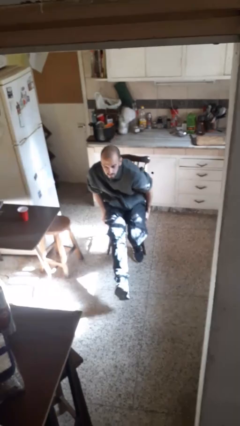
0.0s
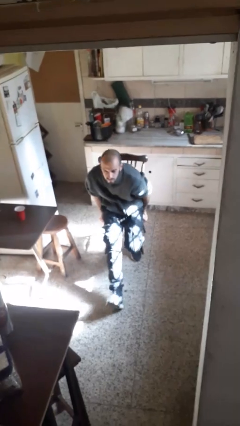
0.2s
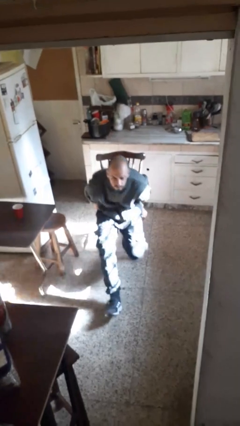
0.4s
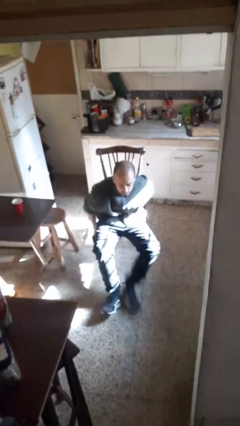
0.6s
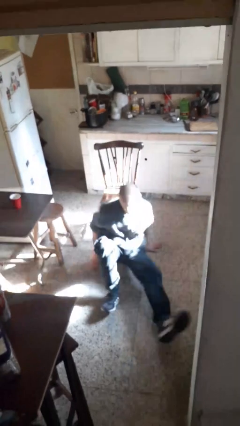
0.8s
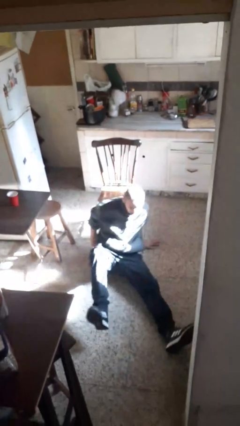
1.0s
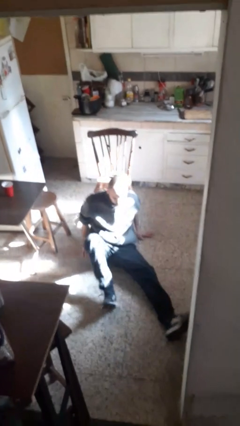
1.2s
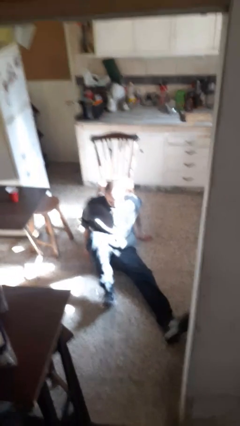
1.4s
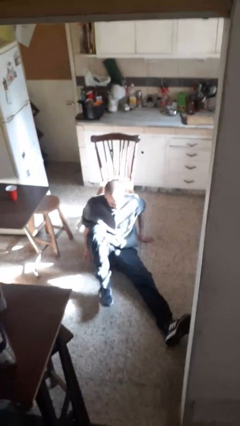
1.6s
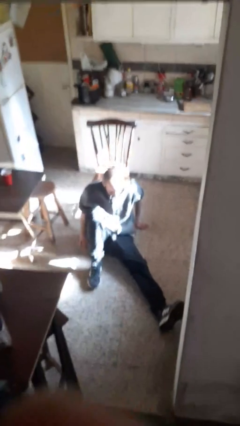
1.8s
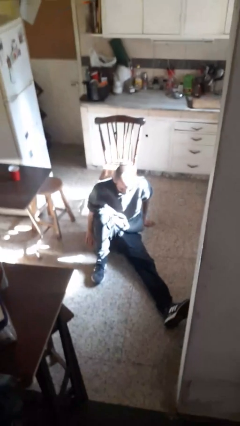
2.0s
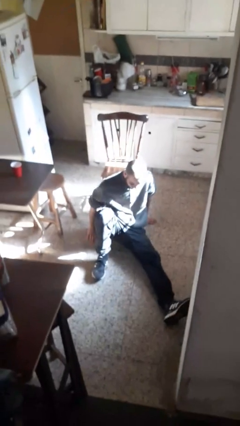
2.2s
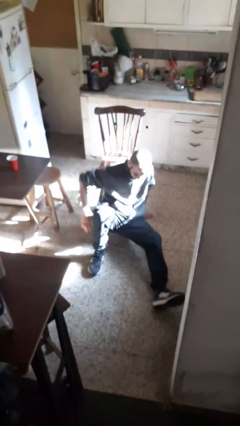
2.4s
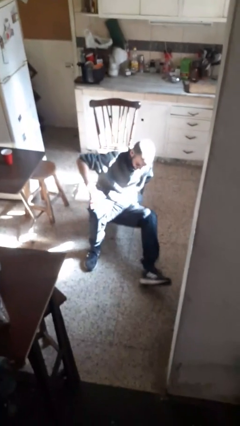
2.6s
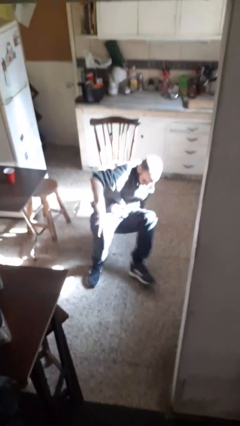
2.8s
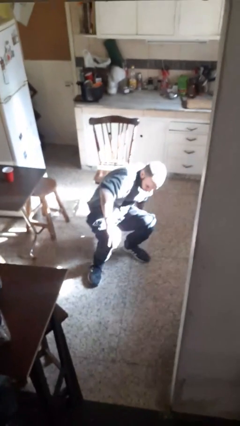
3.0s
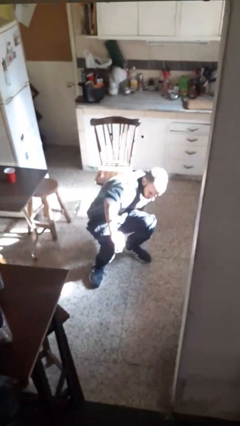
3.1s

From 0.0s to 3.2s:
person falls from chair

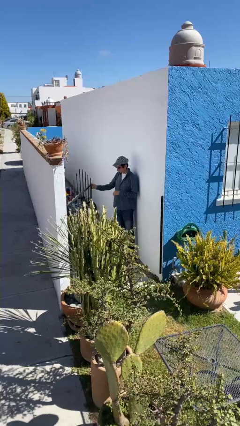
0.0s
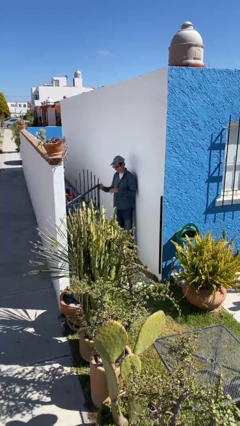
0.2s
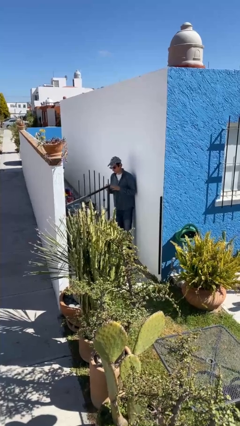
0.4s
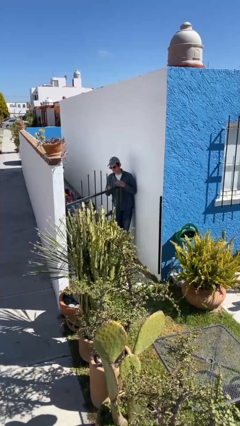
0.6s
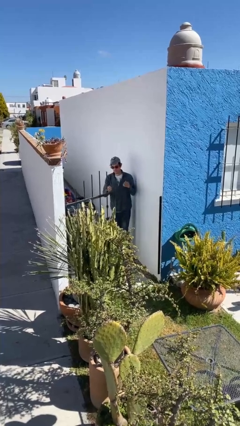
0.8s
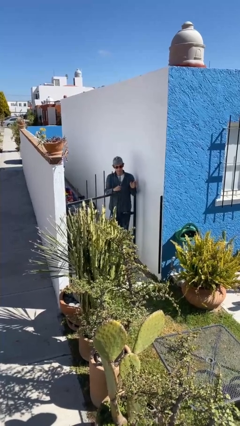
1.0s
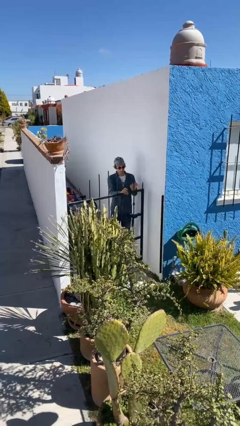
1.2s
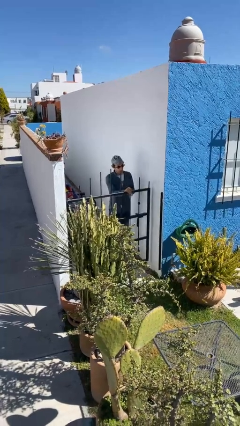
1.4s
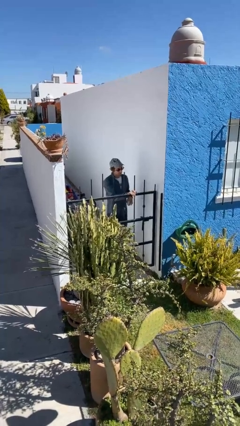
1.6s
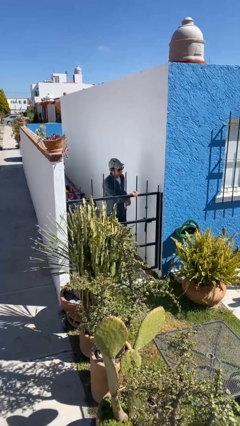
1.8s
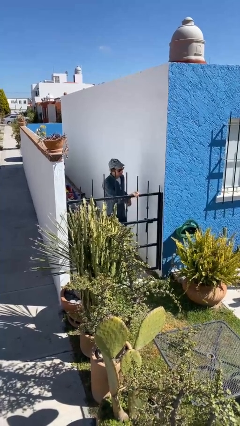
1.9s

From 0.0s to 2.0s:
person closes facility door

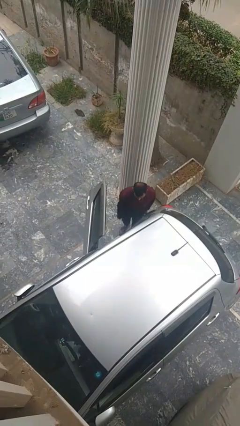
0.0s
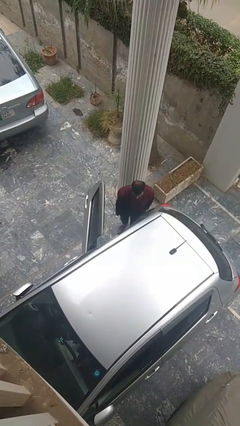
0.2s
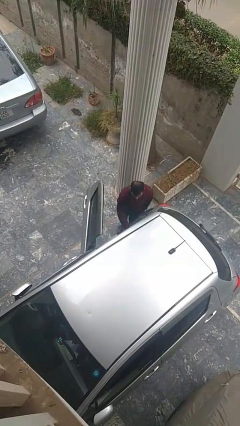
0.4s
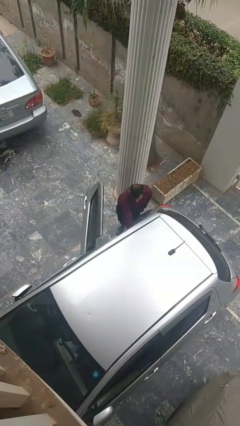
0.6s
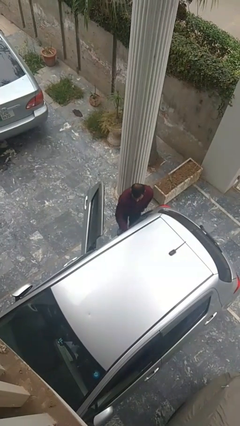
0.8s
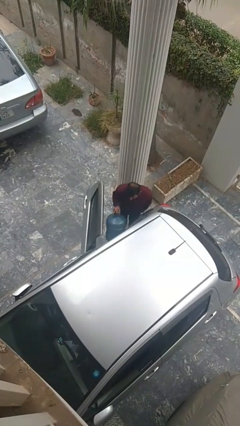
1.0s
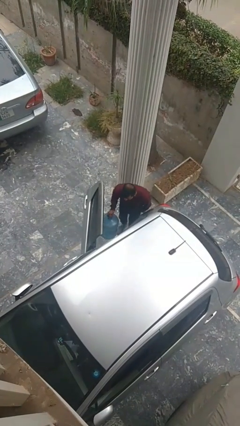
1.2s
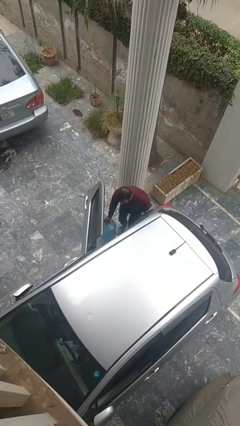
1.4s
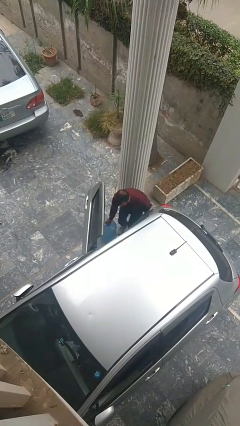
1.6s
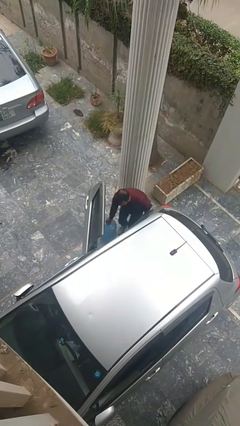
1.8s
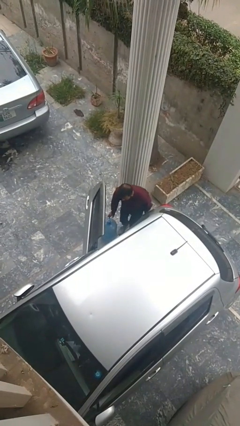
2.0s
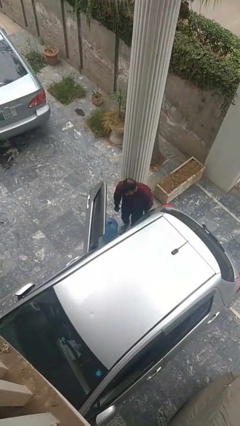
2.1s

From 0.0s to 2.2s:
person unloads car

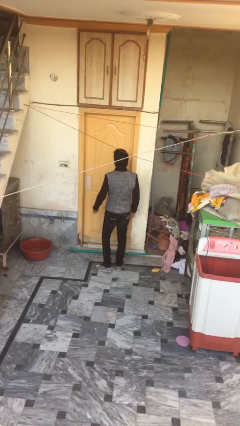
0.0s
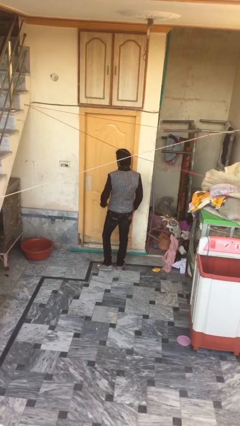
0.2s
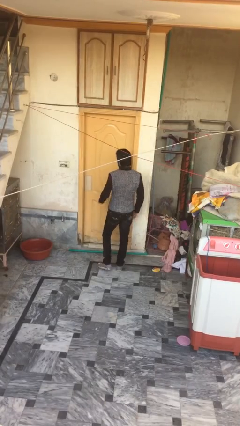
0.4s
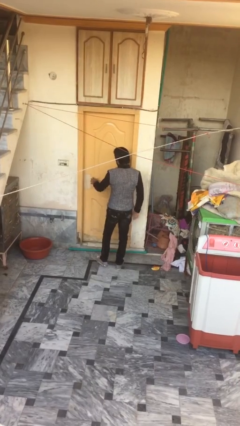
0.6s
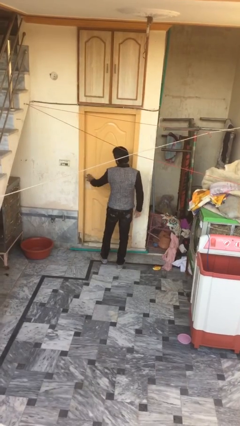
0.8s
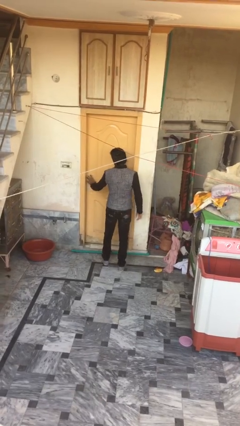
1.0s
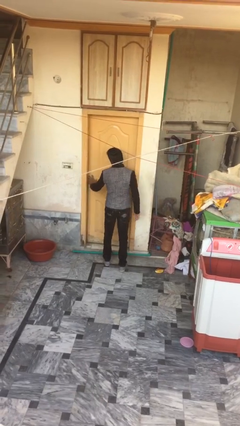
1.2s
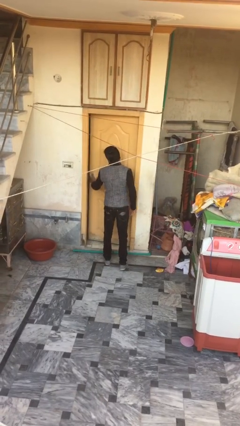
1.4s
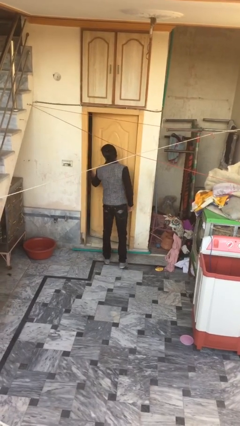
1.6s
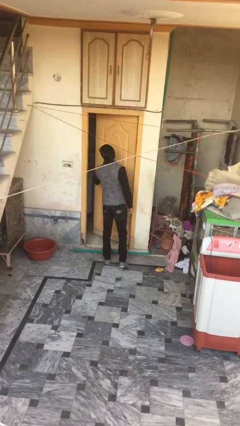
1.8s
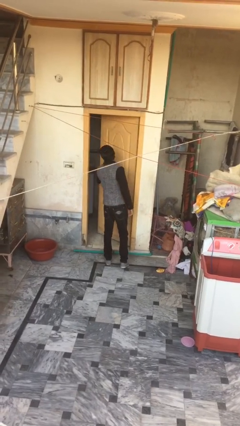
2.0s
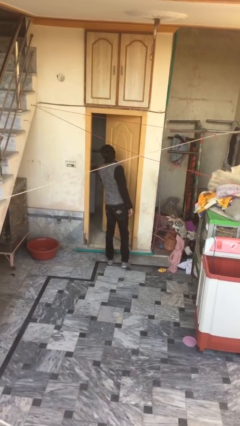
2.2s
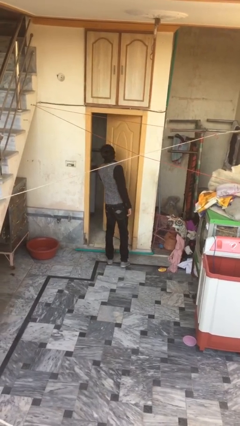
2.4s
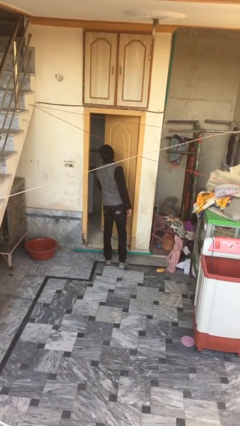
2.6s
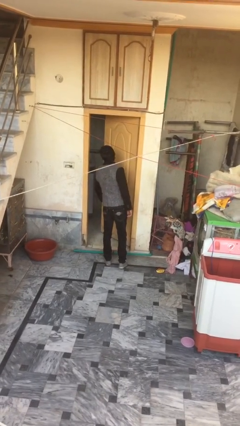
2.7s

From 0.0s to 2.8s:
person opens facility door

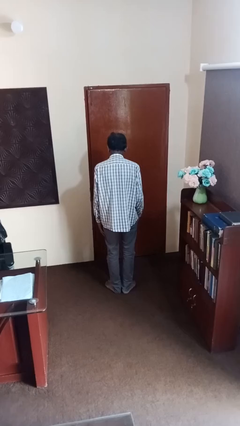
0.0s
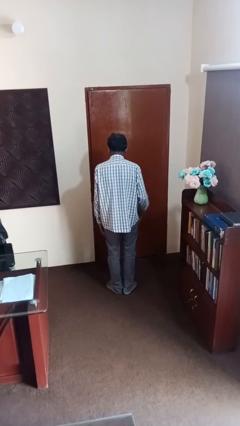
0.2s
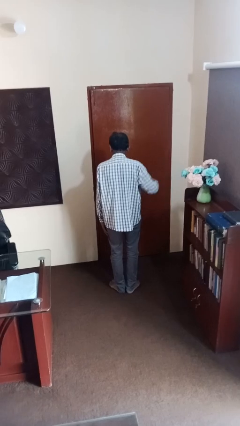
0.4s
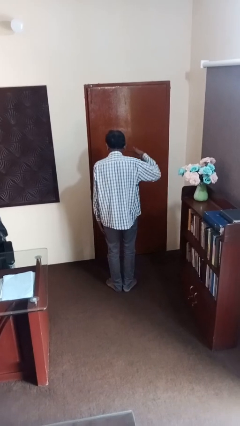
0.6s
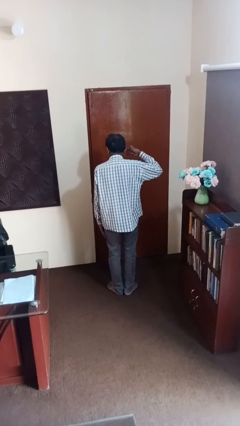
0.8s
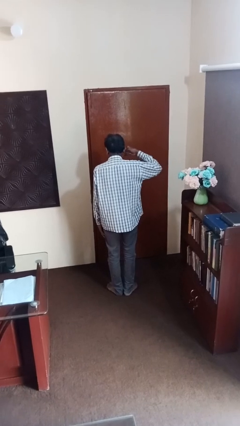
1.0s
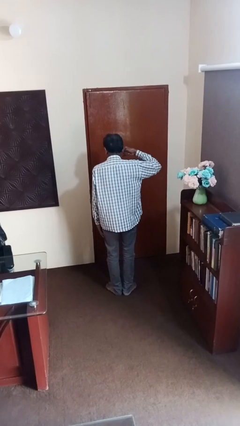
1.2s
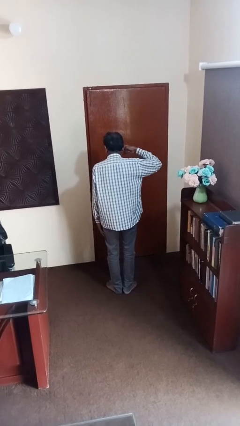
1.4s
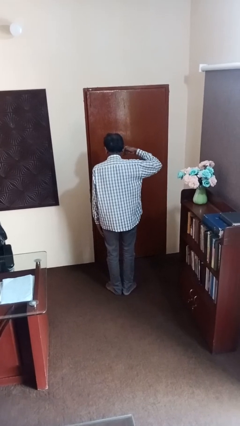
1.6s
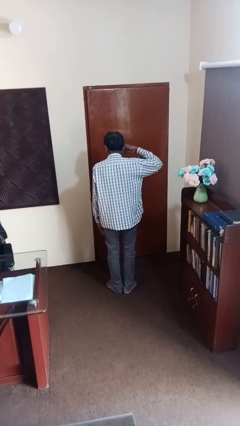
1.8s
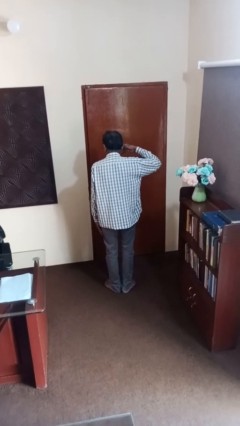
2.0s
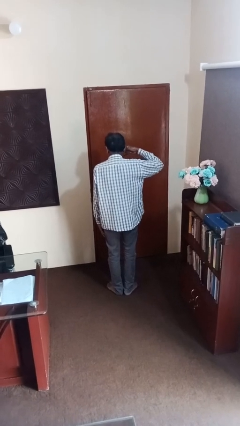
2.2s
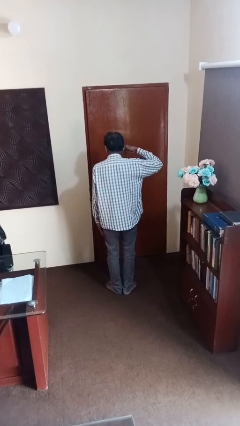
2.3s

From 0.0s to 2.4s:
person gestures call me

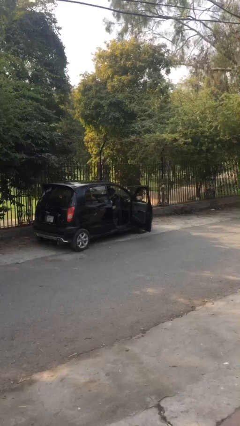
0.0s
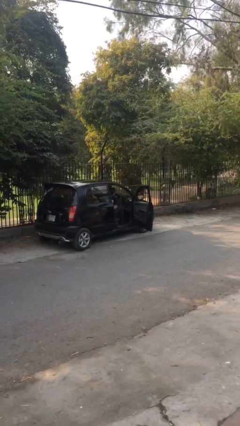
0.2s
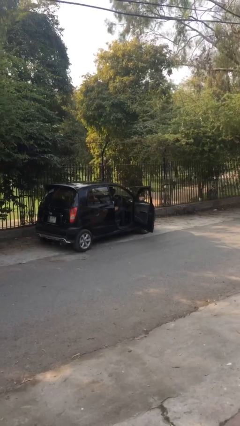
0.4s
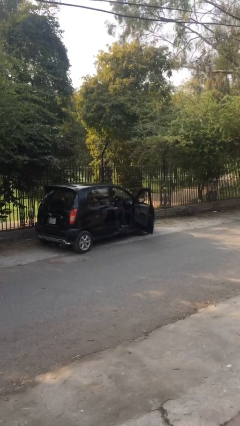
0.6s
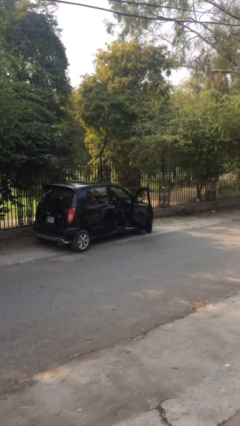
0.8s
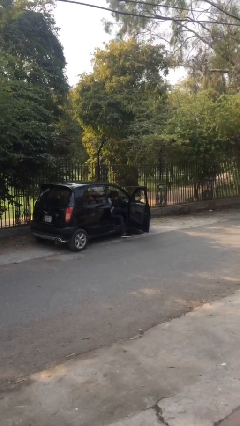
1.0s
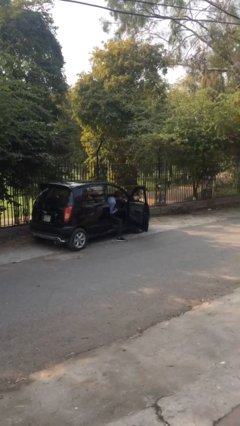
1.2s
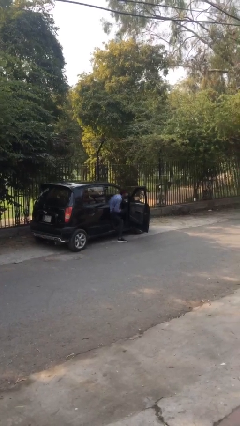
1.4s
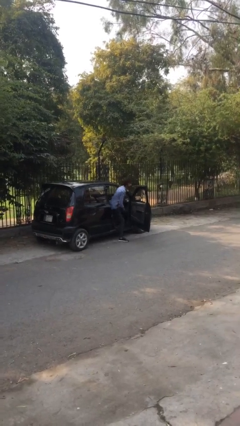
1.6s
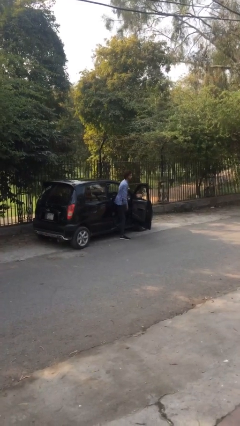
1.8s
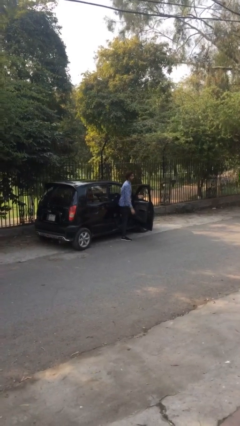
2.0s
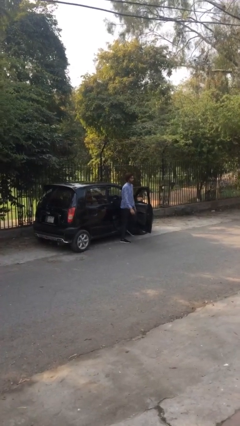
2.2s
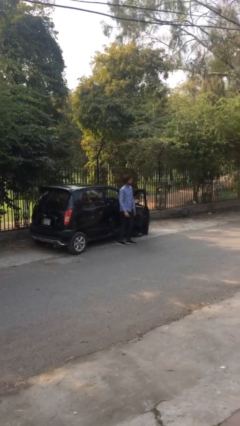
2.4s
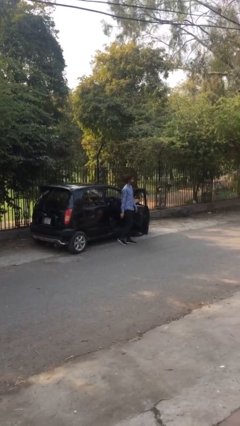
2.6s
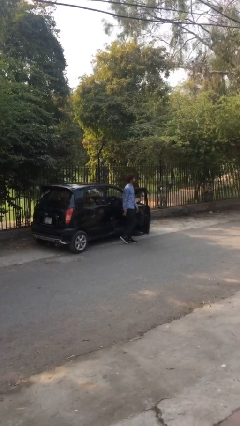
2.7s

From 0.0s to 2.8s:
person exits car

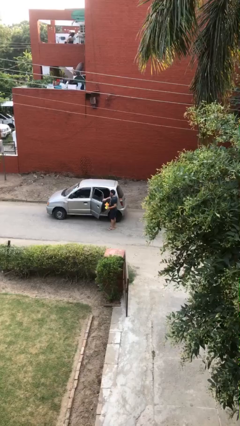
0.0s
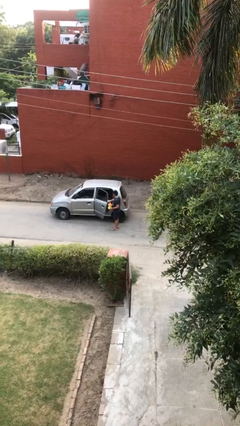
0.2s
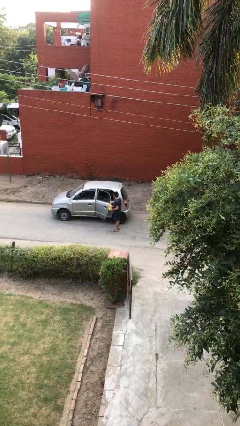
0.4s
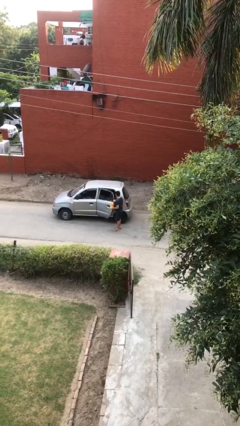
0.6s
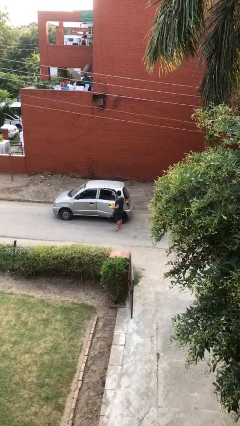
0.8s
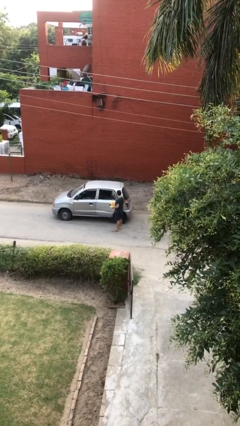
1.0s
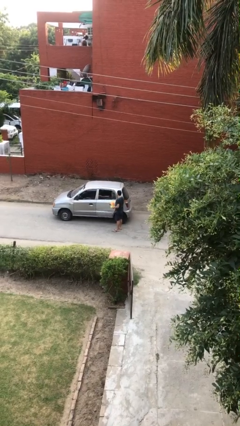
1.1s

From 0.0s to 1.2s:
person closes car door

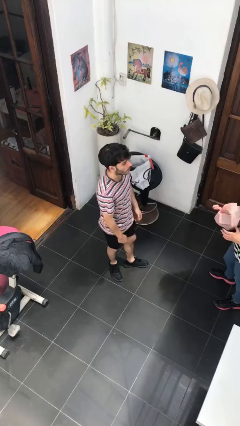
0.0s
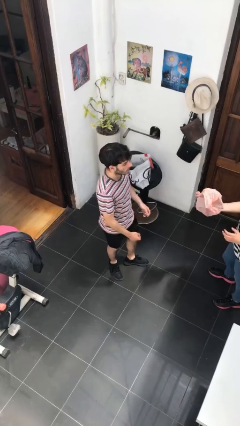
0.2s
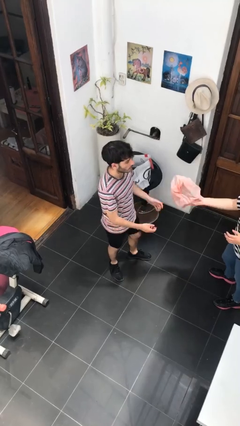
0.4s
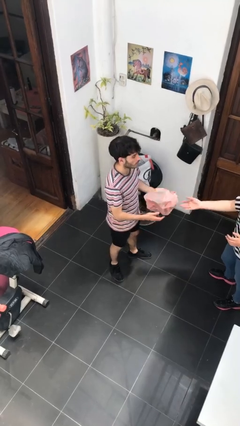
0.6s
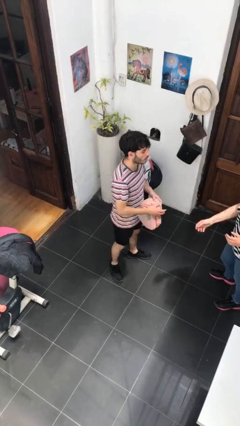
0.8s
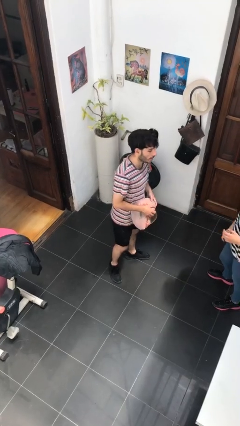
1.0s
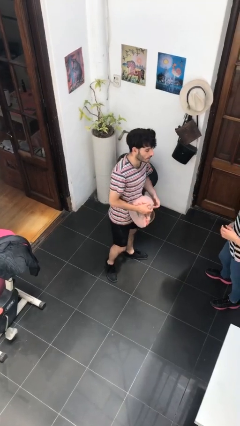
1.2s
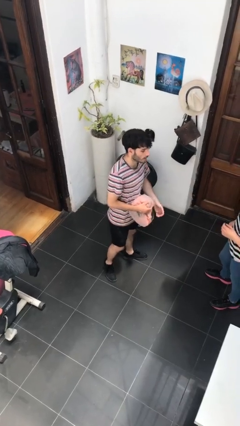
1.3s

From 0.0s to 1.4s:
person transfers object to person
